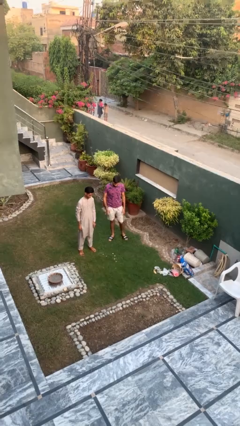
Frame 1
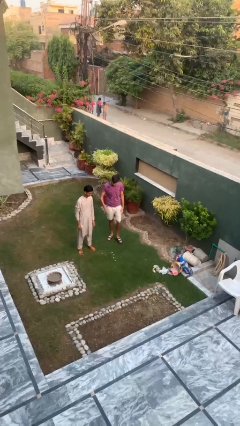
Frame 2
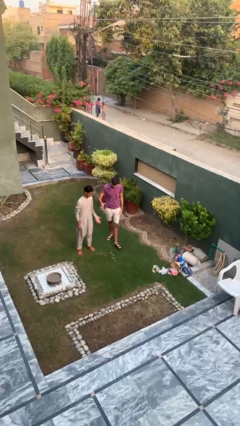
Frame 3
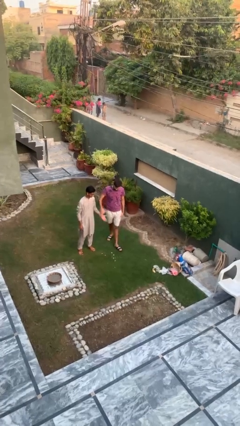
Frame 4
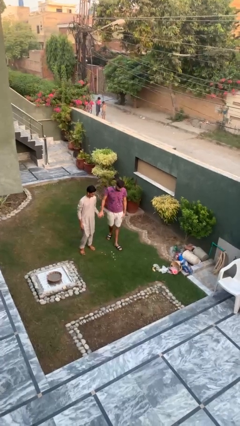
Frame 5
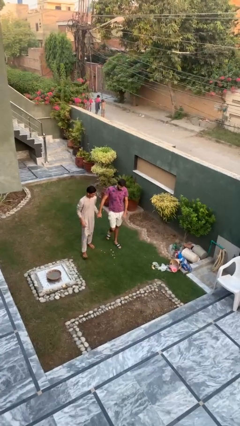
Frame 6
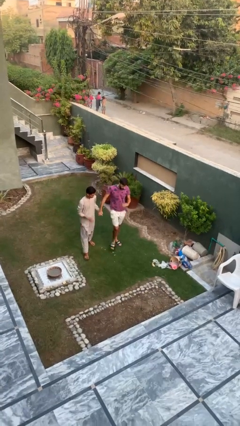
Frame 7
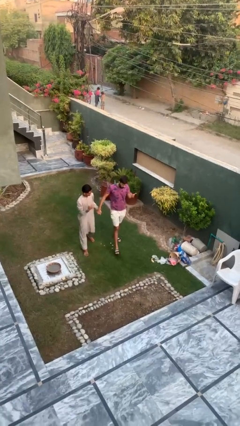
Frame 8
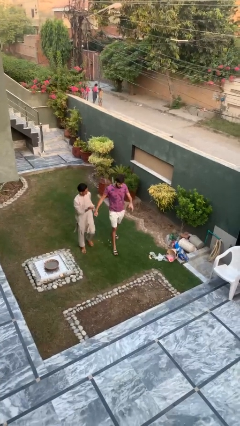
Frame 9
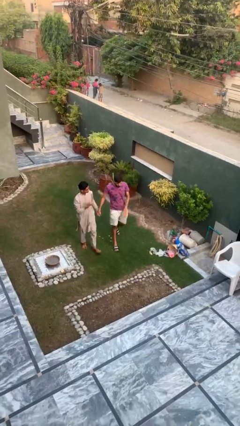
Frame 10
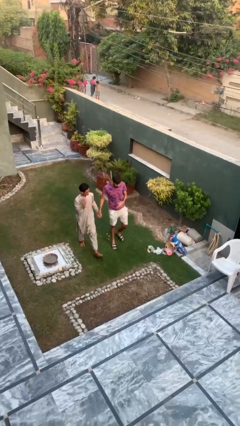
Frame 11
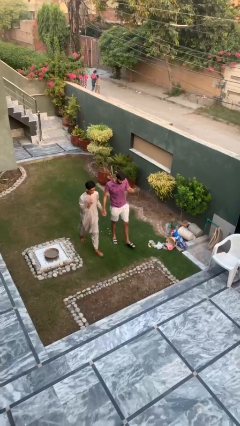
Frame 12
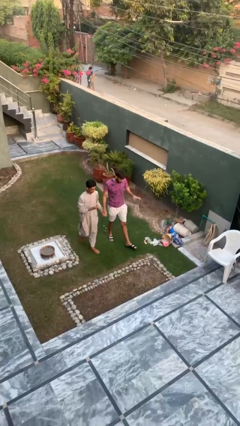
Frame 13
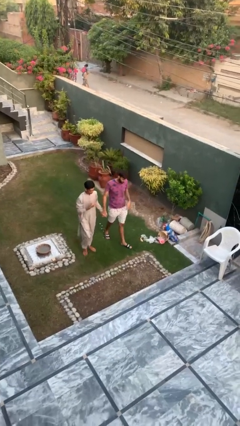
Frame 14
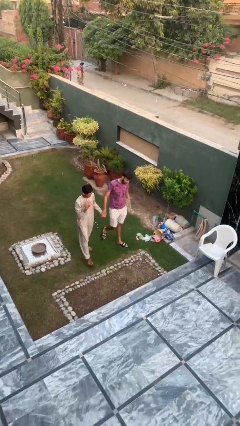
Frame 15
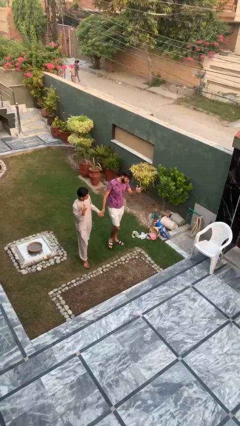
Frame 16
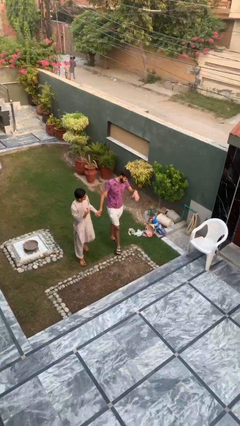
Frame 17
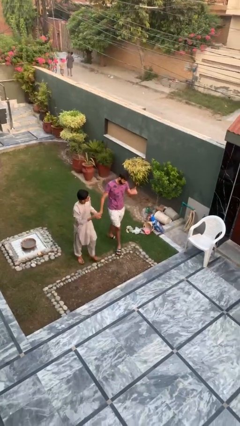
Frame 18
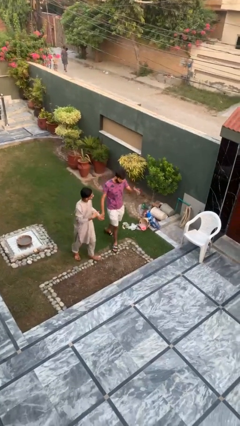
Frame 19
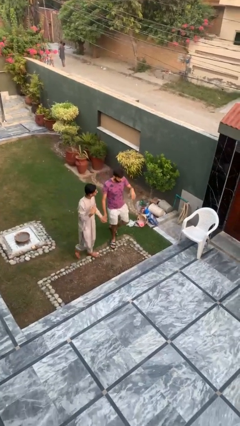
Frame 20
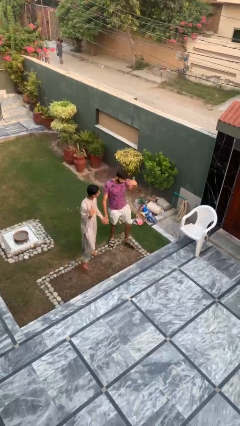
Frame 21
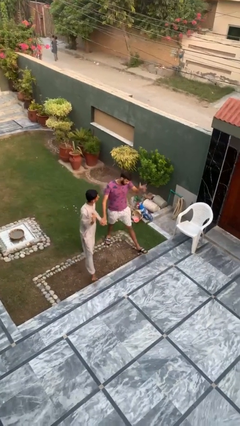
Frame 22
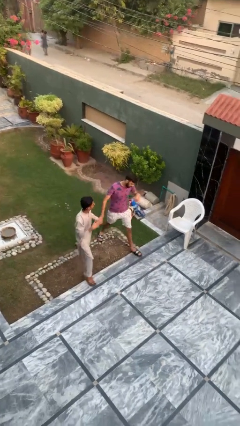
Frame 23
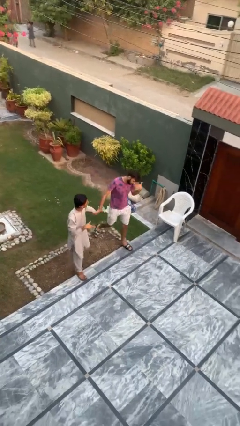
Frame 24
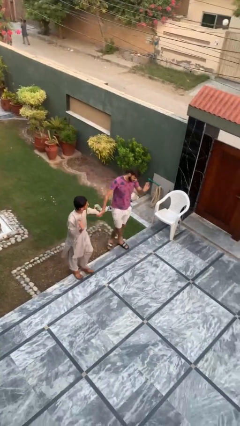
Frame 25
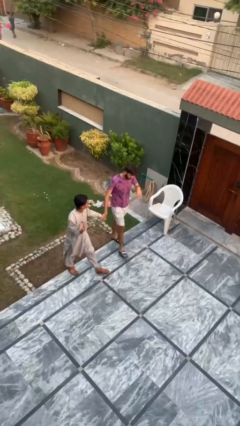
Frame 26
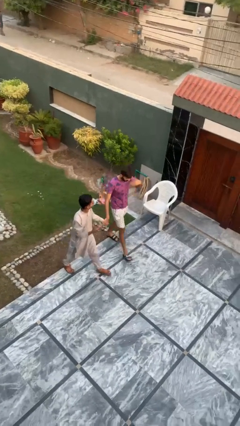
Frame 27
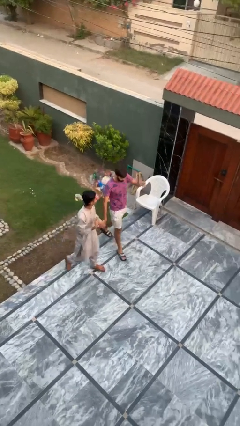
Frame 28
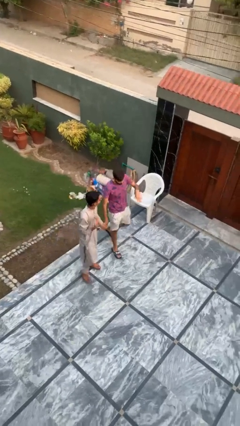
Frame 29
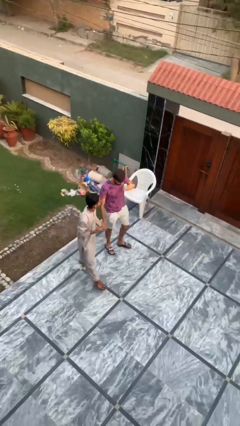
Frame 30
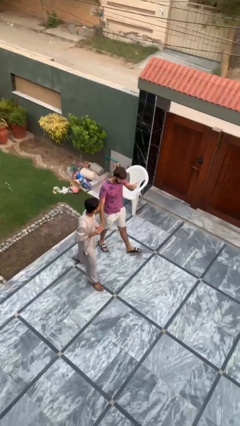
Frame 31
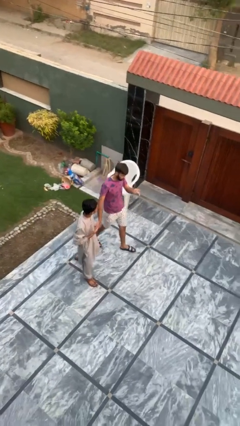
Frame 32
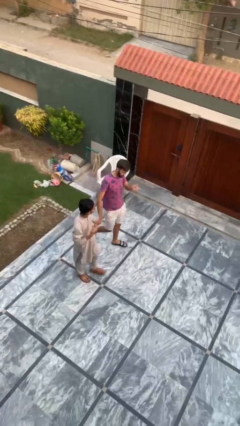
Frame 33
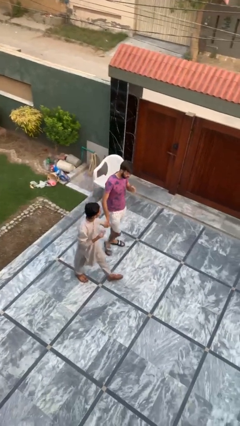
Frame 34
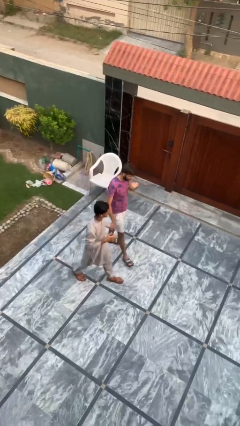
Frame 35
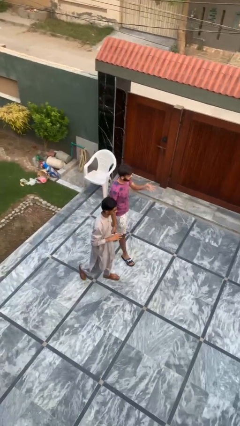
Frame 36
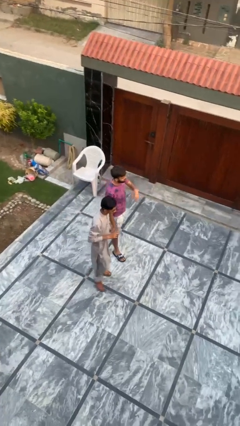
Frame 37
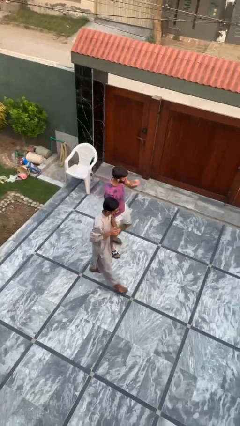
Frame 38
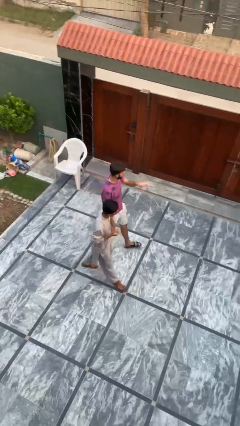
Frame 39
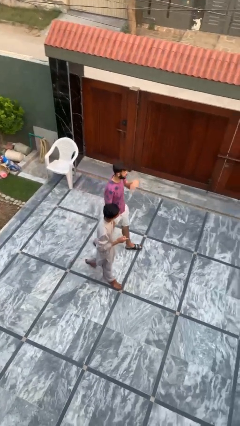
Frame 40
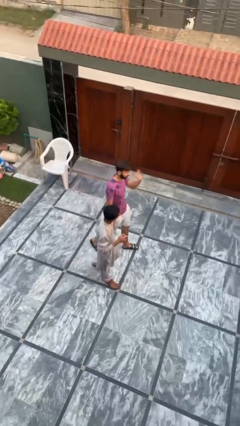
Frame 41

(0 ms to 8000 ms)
person holds hand

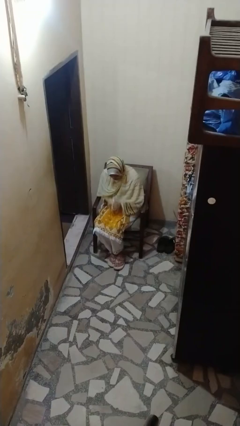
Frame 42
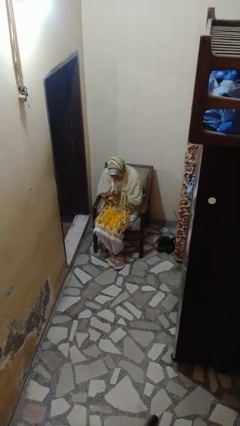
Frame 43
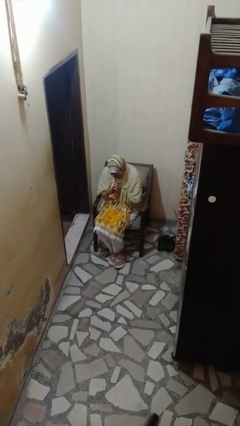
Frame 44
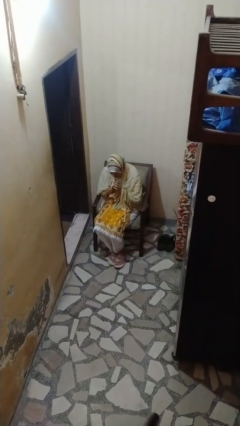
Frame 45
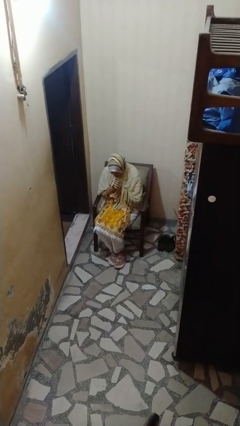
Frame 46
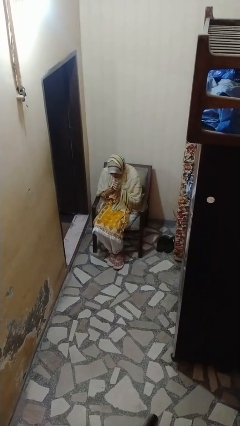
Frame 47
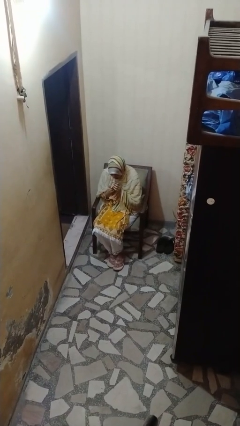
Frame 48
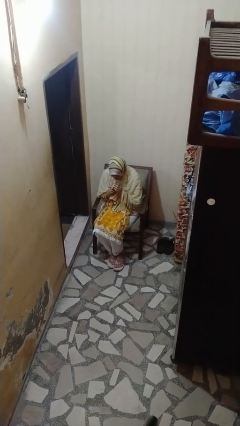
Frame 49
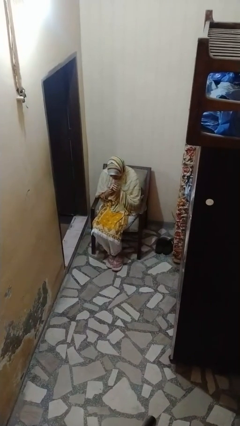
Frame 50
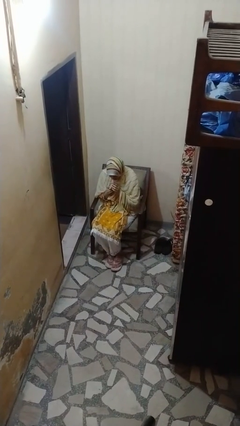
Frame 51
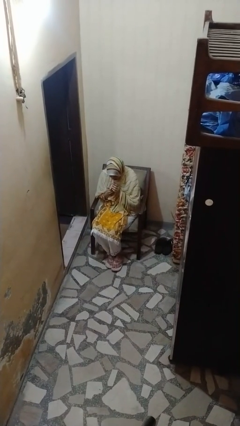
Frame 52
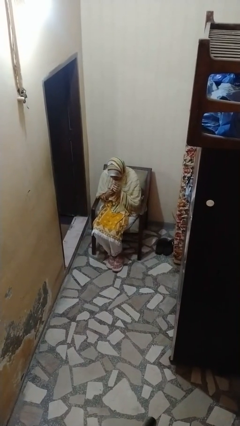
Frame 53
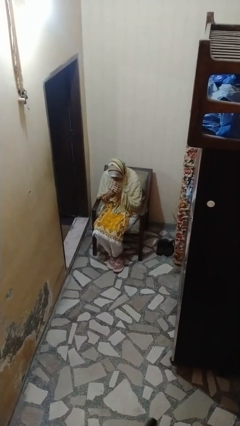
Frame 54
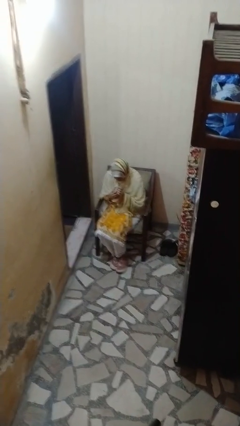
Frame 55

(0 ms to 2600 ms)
person eats banana

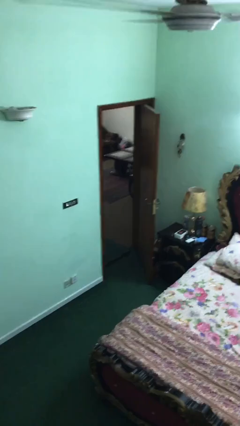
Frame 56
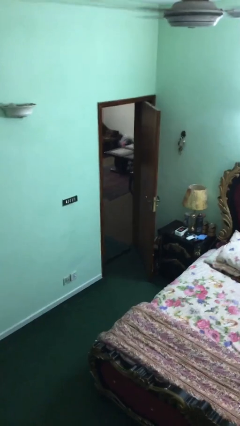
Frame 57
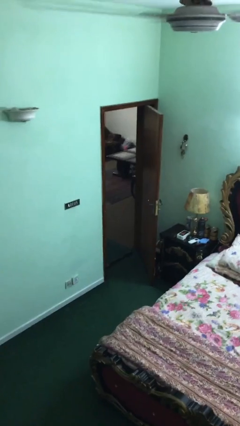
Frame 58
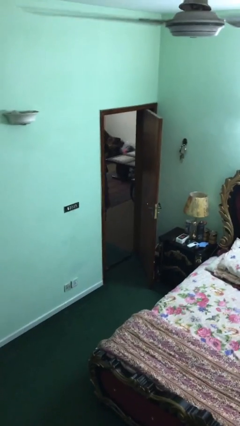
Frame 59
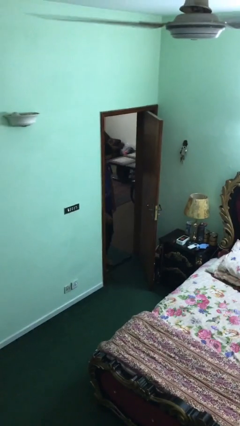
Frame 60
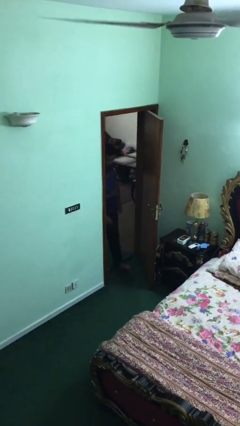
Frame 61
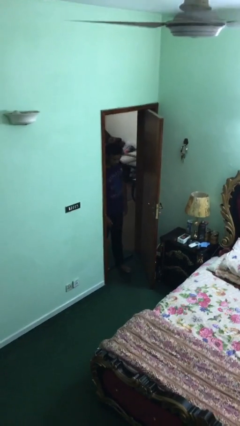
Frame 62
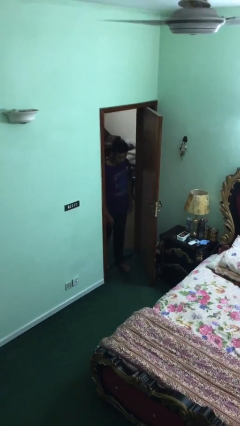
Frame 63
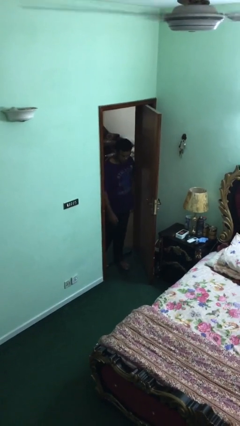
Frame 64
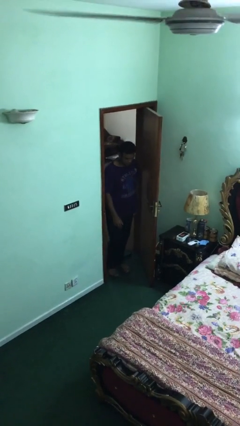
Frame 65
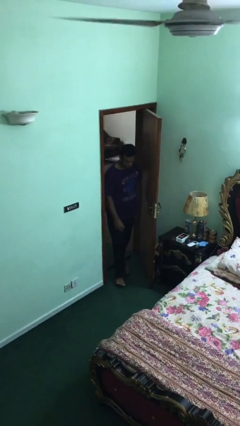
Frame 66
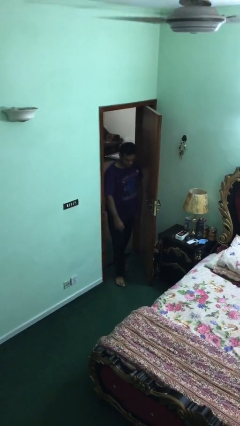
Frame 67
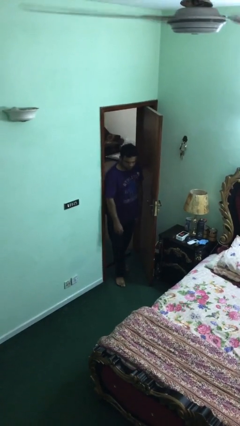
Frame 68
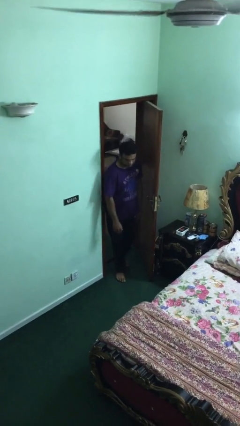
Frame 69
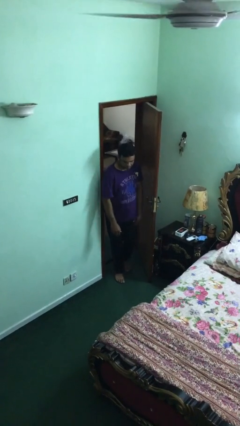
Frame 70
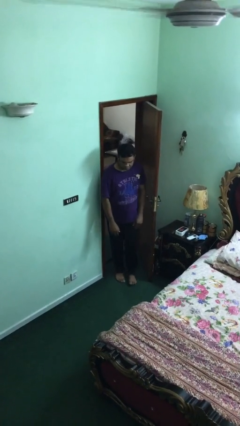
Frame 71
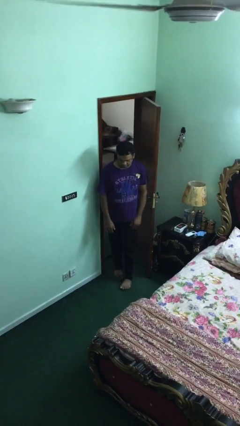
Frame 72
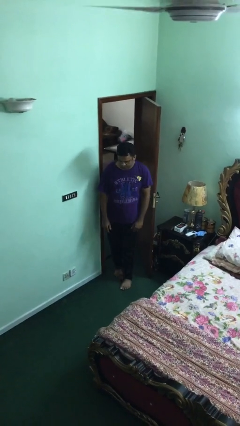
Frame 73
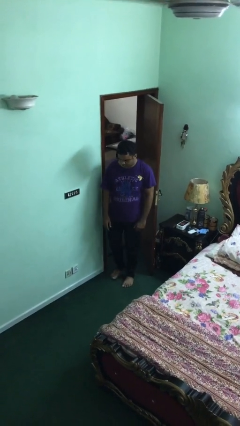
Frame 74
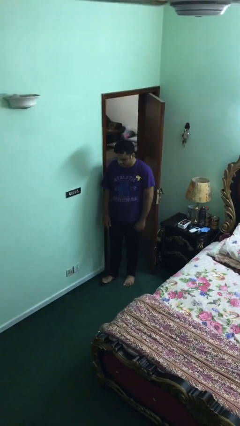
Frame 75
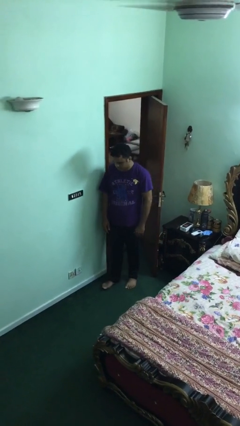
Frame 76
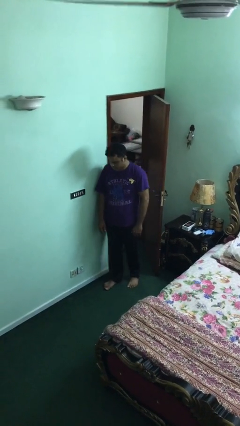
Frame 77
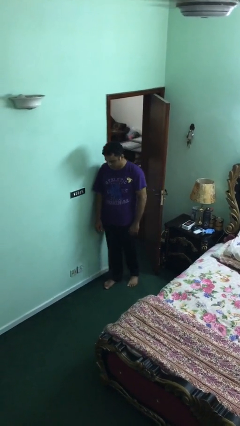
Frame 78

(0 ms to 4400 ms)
person enters scene through structure

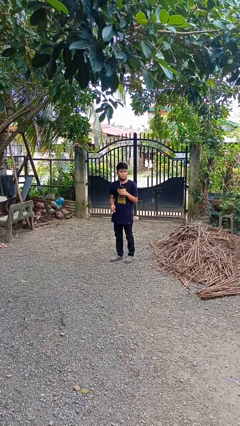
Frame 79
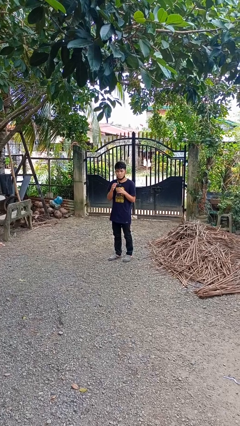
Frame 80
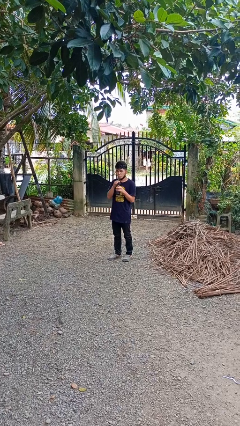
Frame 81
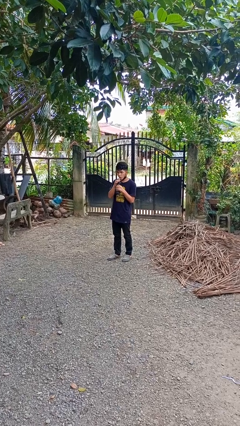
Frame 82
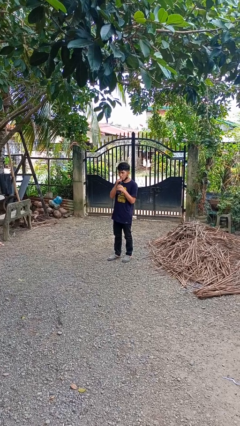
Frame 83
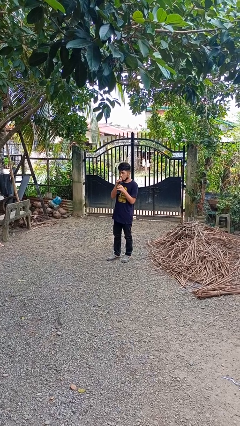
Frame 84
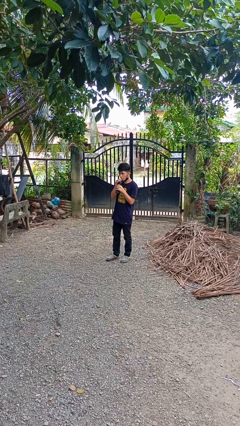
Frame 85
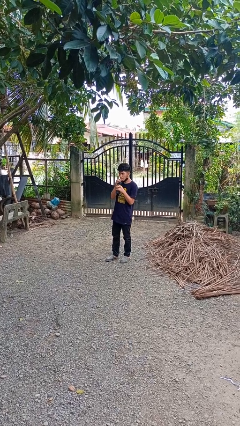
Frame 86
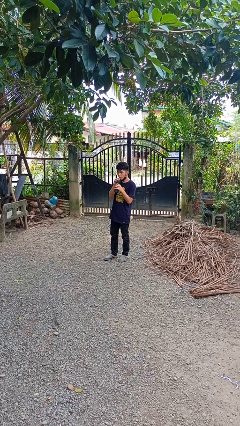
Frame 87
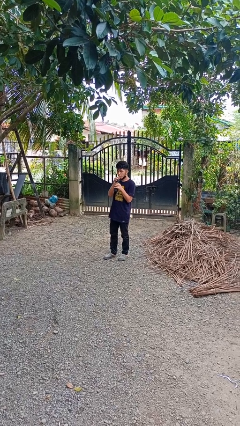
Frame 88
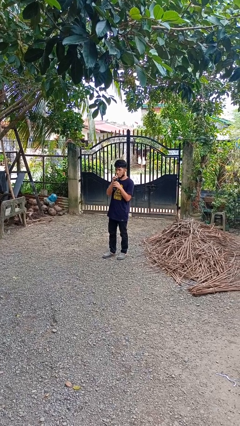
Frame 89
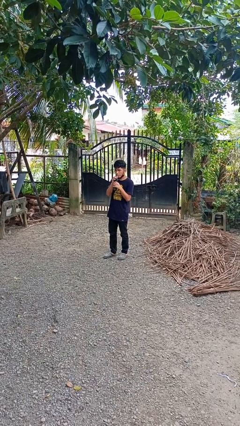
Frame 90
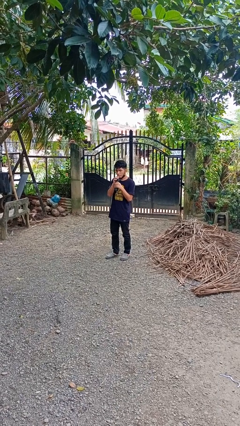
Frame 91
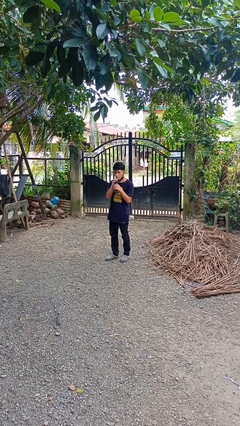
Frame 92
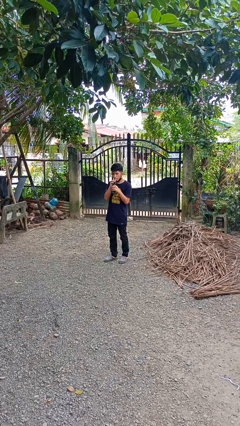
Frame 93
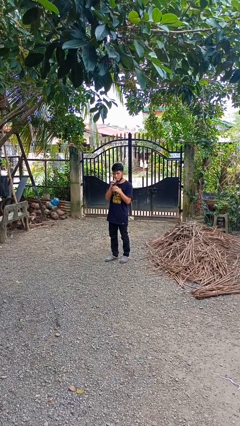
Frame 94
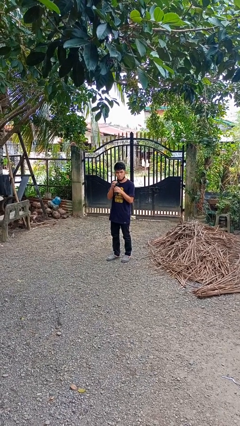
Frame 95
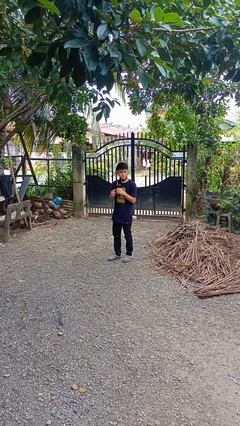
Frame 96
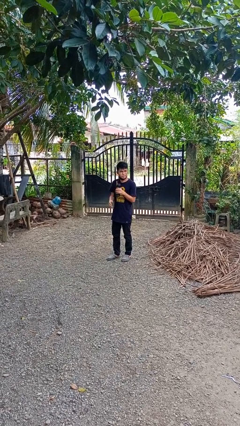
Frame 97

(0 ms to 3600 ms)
person drinks from straw
